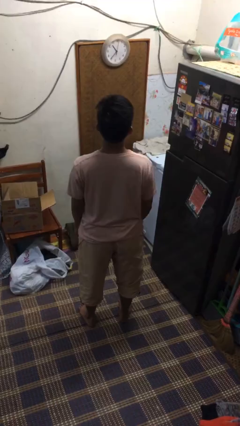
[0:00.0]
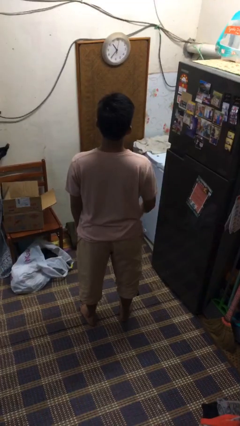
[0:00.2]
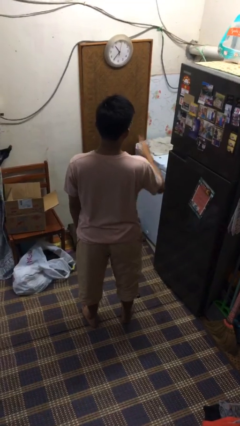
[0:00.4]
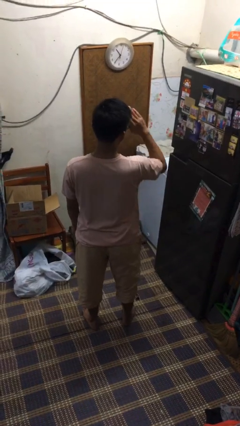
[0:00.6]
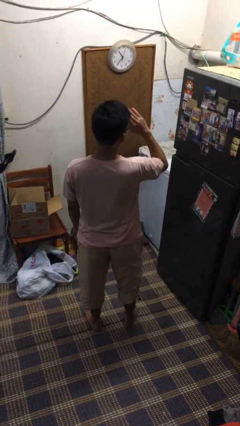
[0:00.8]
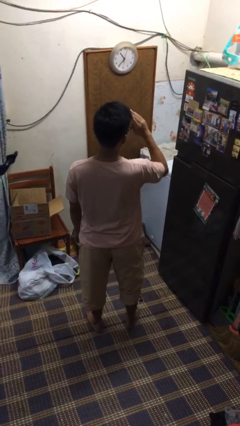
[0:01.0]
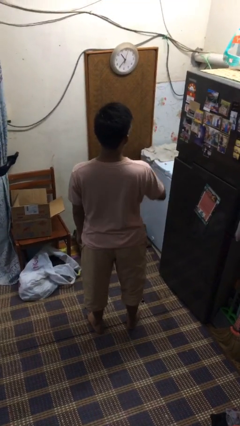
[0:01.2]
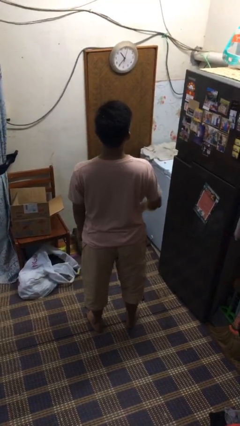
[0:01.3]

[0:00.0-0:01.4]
person salutes

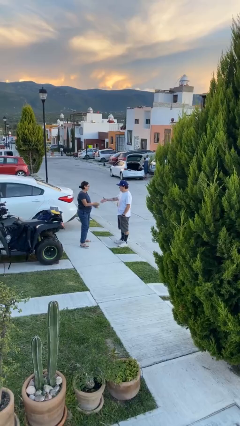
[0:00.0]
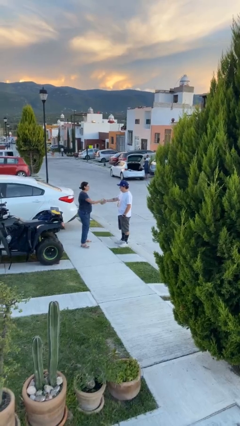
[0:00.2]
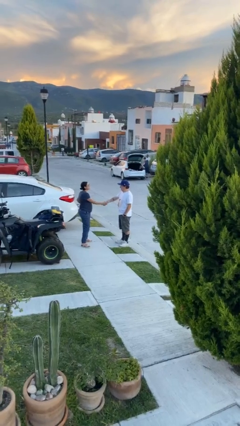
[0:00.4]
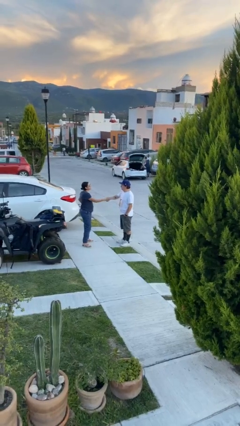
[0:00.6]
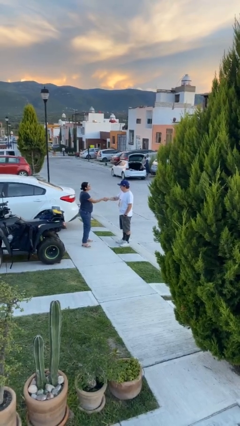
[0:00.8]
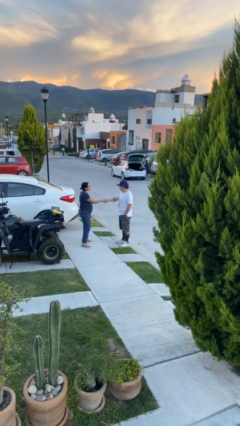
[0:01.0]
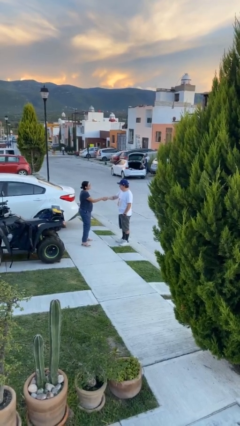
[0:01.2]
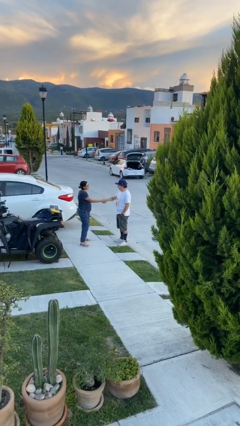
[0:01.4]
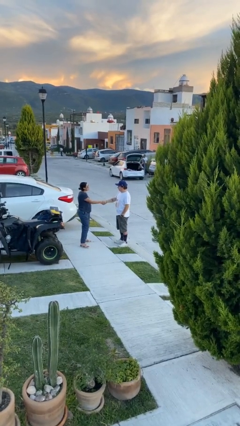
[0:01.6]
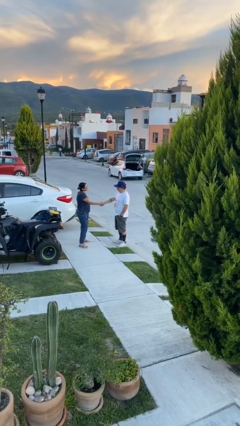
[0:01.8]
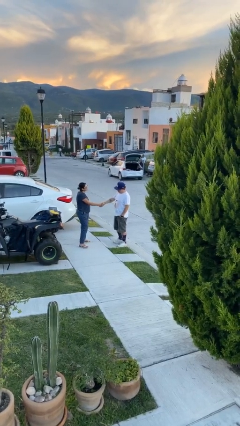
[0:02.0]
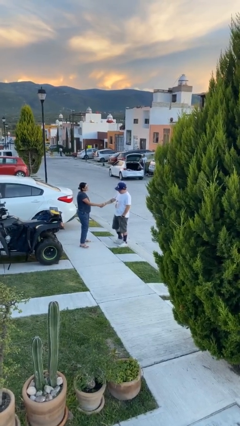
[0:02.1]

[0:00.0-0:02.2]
person shakes hand

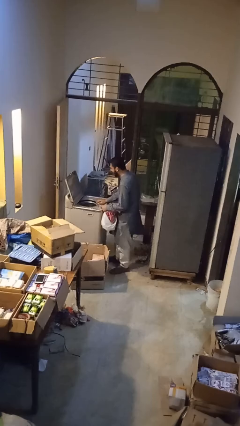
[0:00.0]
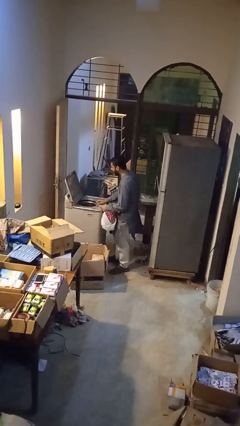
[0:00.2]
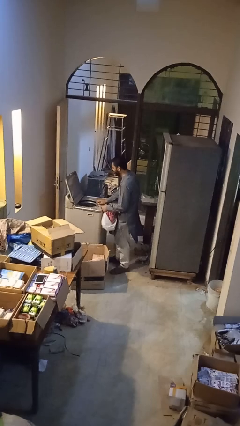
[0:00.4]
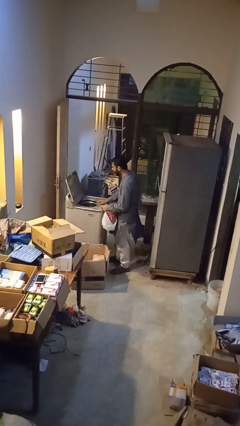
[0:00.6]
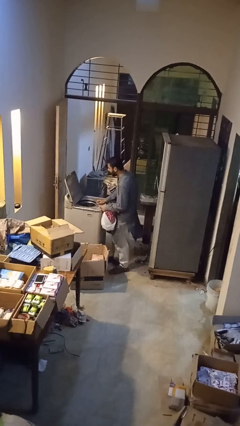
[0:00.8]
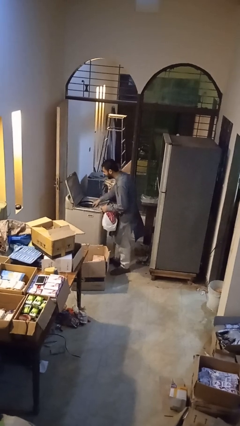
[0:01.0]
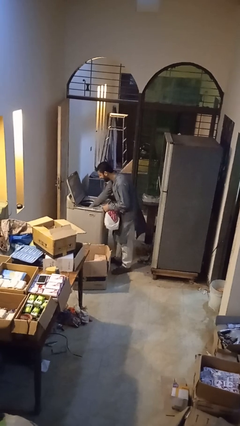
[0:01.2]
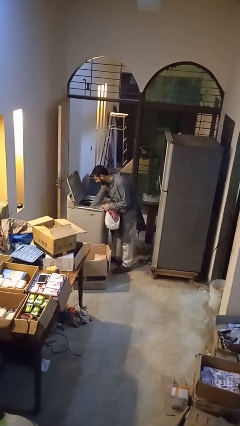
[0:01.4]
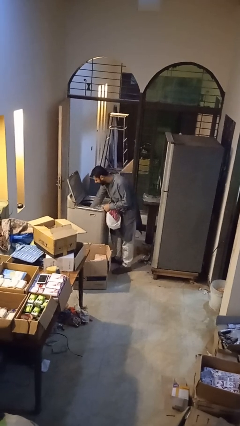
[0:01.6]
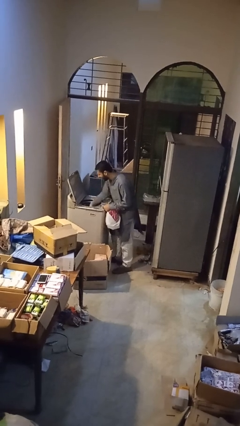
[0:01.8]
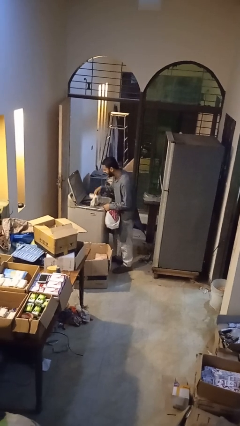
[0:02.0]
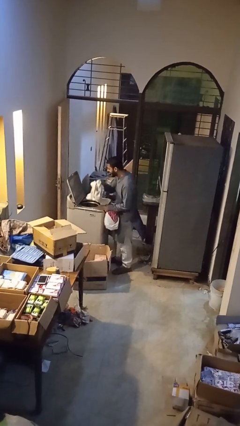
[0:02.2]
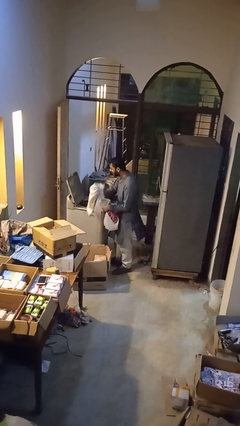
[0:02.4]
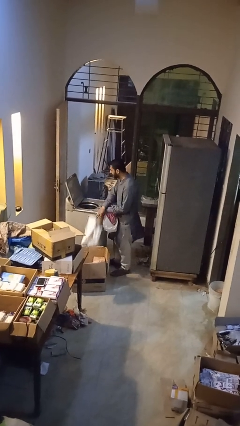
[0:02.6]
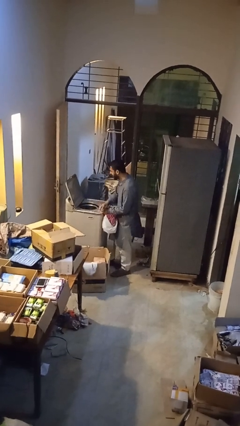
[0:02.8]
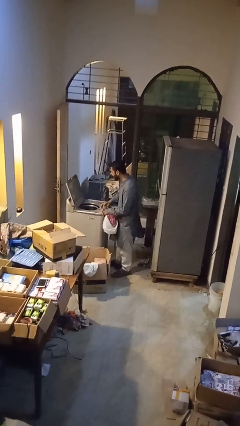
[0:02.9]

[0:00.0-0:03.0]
person unloads dryer

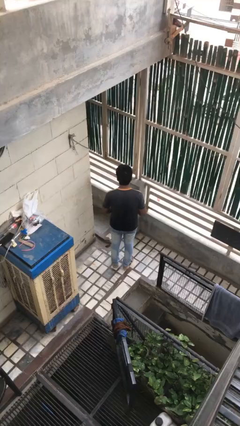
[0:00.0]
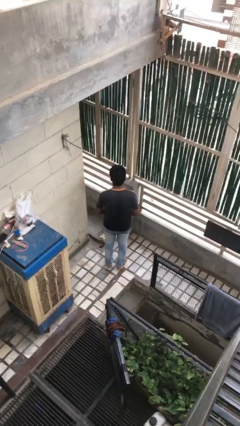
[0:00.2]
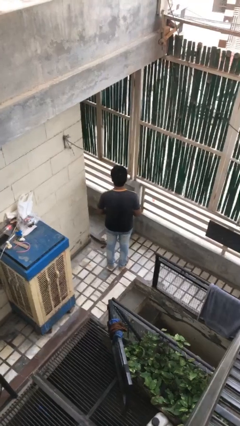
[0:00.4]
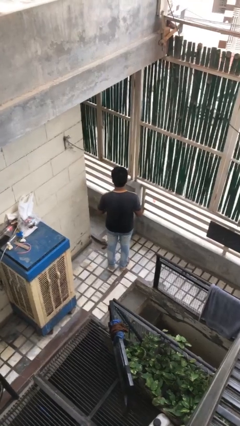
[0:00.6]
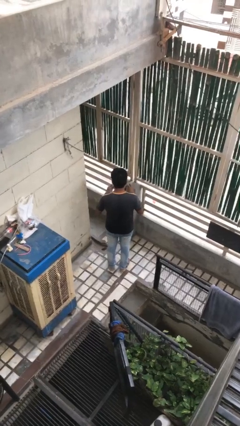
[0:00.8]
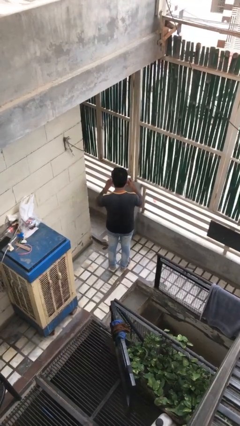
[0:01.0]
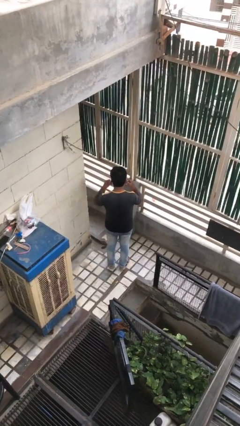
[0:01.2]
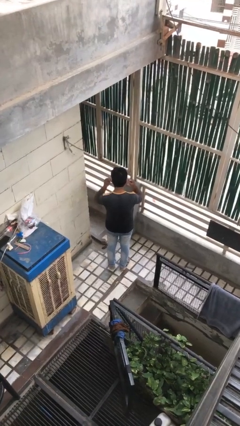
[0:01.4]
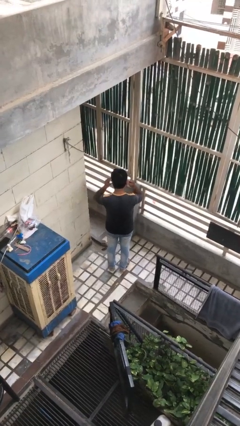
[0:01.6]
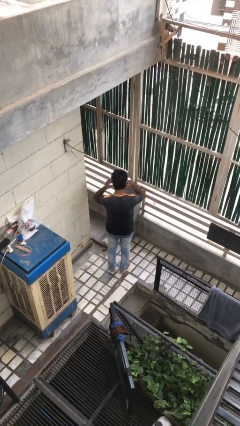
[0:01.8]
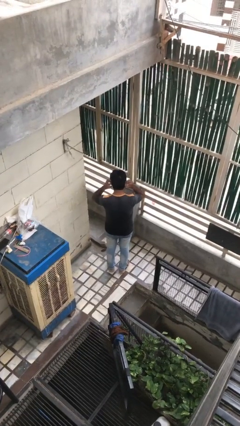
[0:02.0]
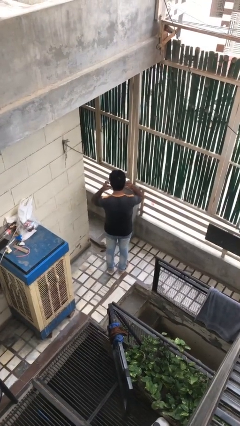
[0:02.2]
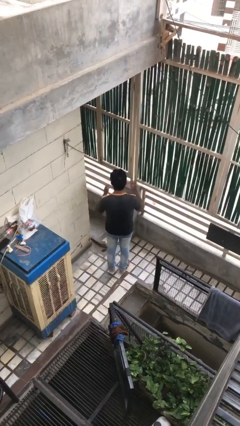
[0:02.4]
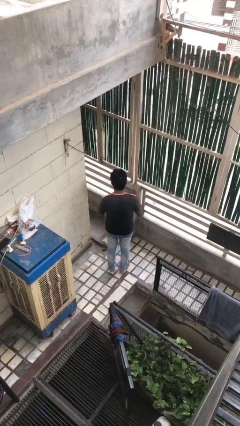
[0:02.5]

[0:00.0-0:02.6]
person puts on facemask

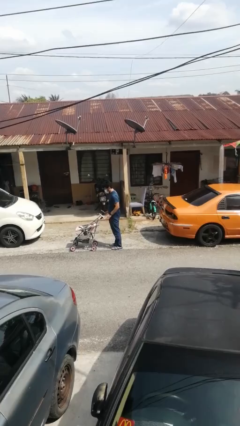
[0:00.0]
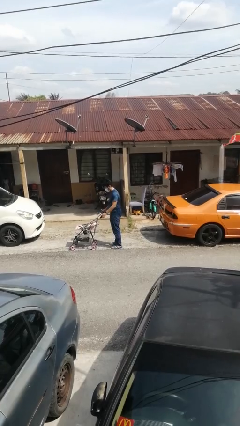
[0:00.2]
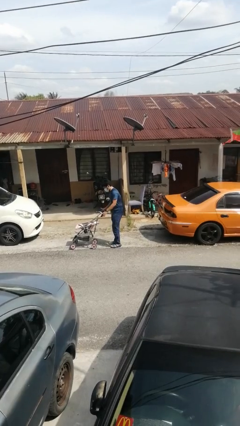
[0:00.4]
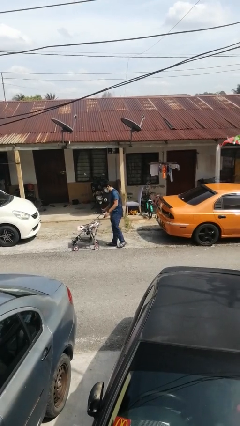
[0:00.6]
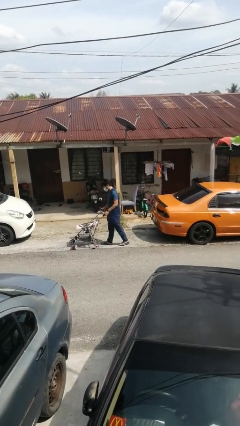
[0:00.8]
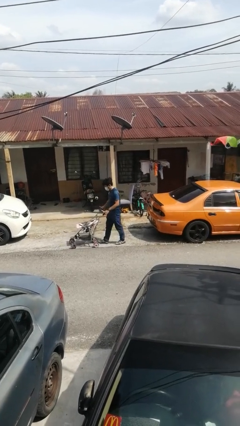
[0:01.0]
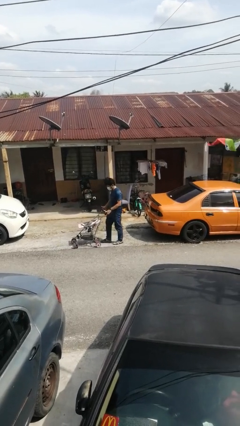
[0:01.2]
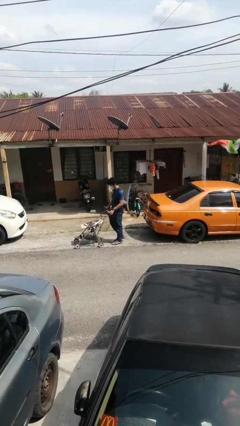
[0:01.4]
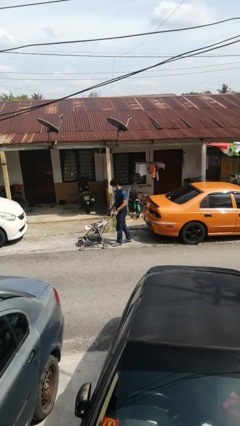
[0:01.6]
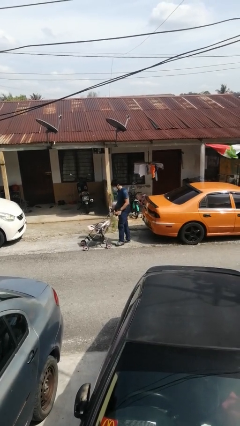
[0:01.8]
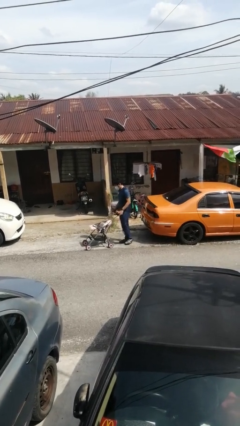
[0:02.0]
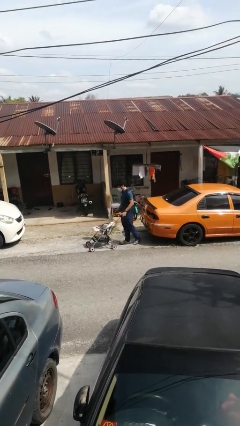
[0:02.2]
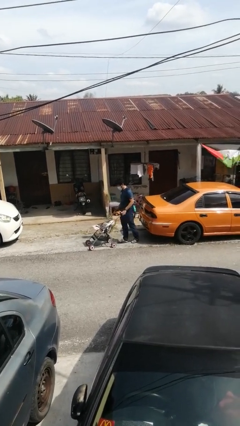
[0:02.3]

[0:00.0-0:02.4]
person pulls wheeled cart

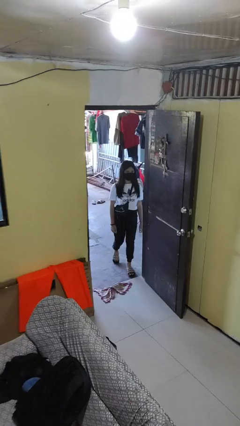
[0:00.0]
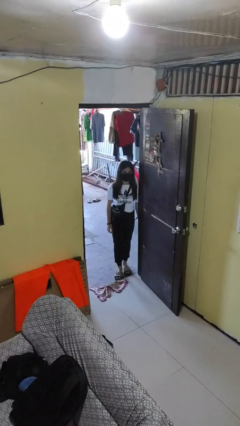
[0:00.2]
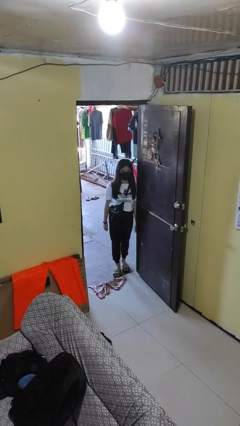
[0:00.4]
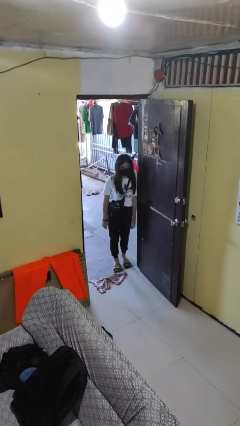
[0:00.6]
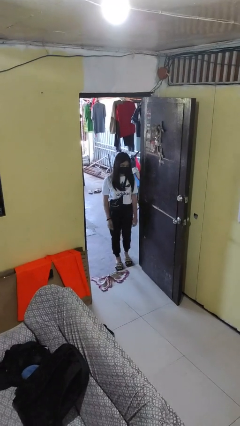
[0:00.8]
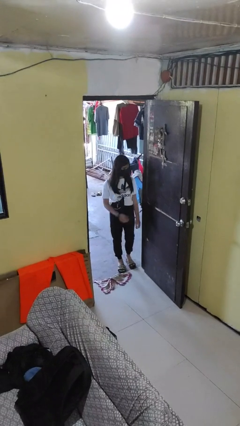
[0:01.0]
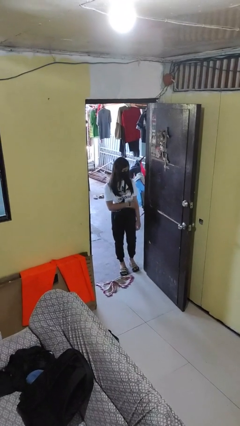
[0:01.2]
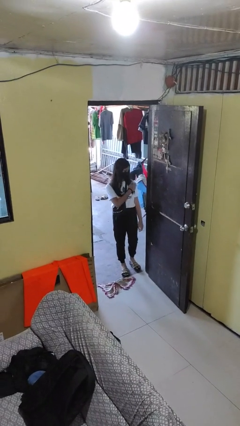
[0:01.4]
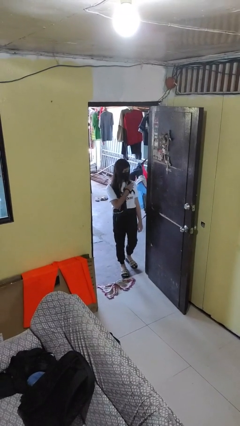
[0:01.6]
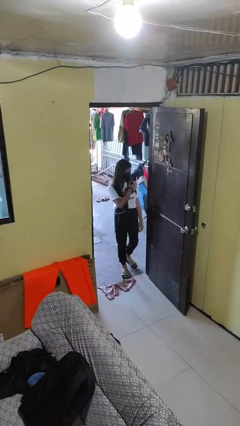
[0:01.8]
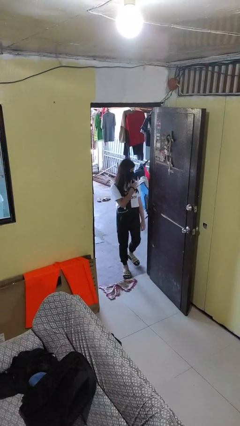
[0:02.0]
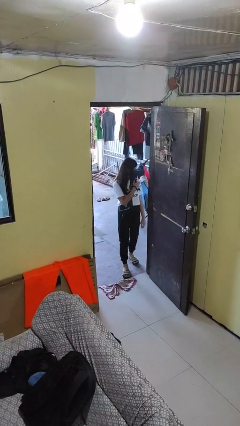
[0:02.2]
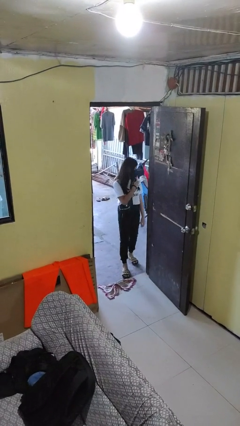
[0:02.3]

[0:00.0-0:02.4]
person bumps into wall

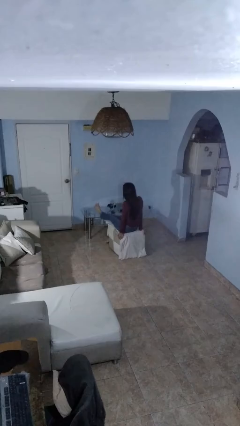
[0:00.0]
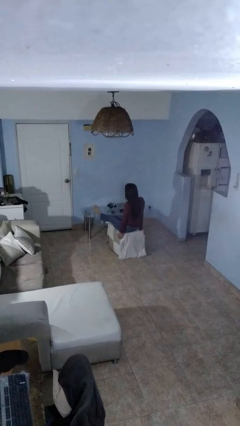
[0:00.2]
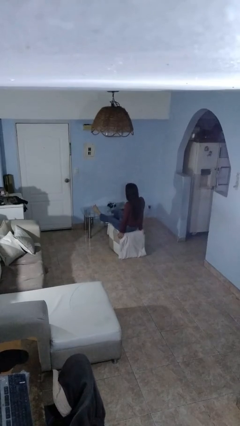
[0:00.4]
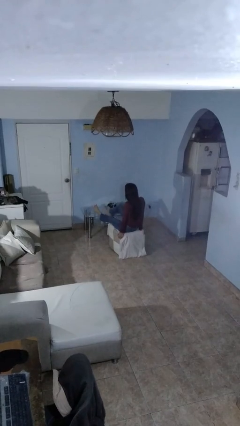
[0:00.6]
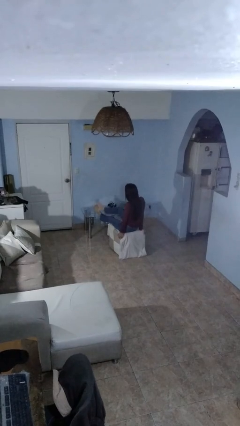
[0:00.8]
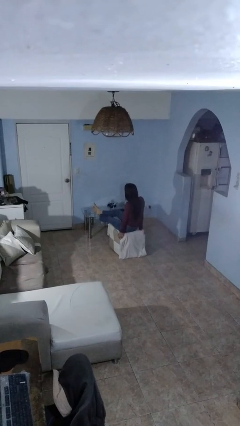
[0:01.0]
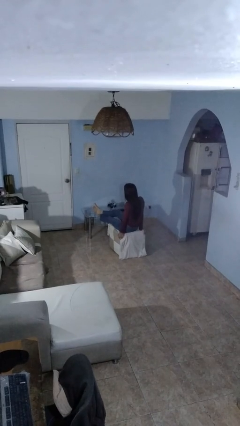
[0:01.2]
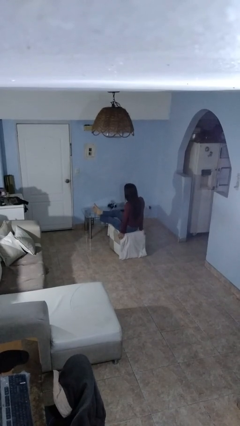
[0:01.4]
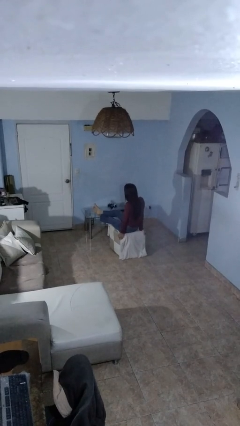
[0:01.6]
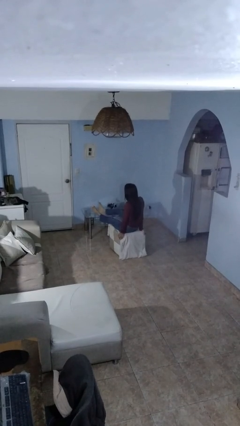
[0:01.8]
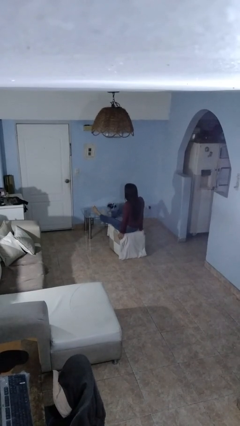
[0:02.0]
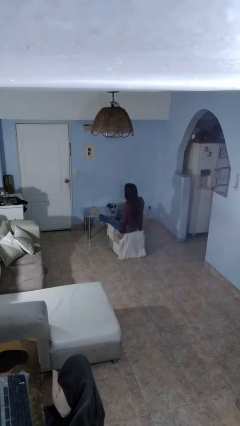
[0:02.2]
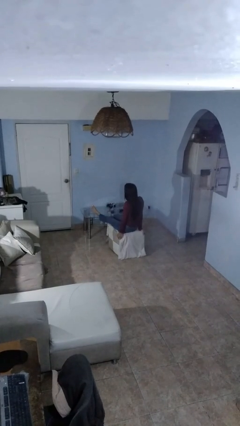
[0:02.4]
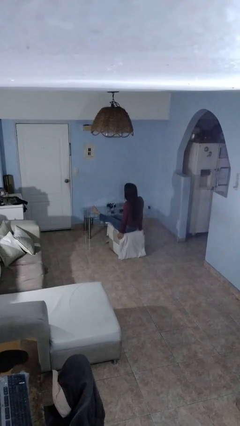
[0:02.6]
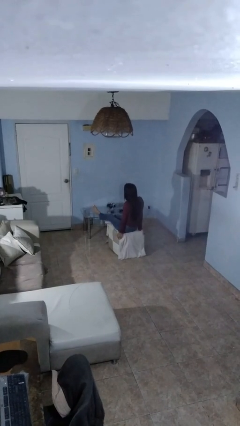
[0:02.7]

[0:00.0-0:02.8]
person puts feet up

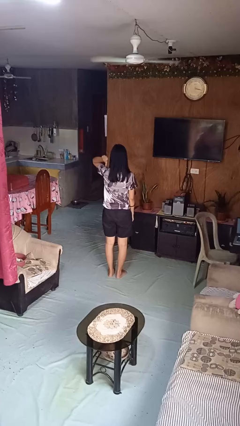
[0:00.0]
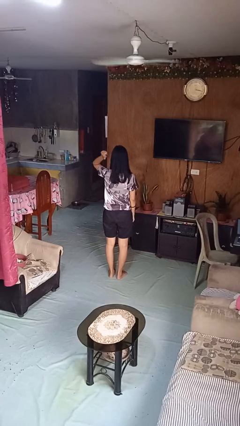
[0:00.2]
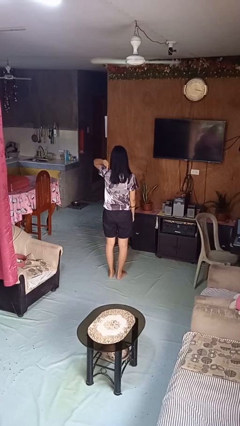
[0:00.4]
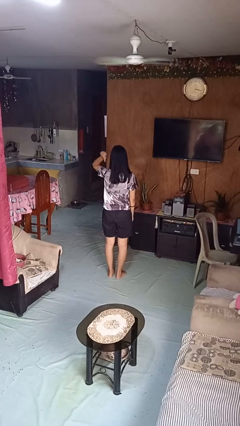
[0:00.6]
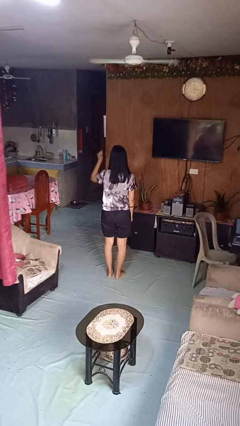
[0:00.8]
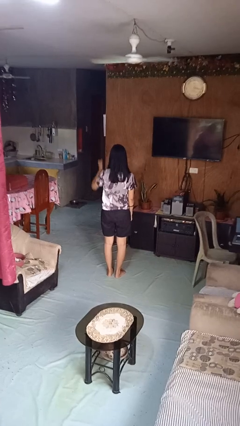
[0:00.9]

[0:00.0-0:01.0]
person gestures behind me
